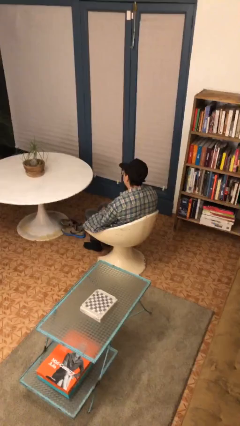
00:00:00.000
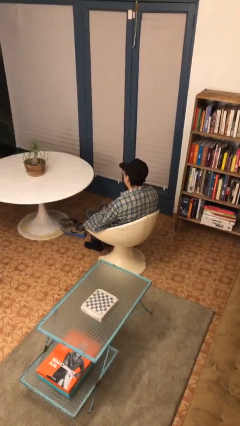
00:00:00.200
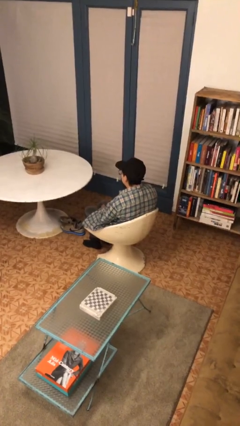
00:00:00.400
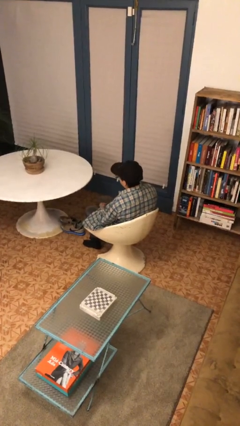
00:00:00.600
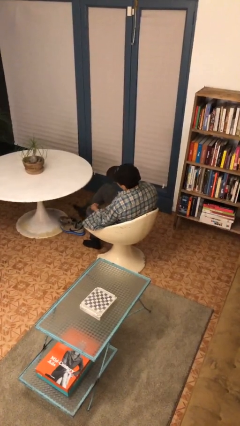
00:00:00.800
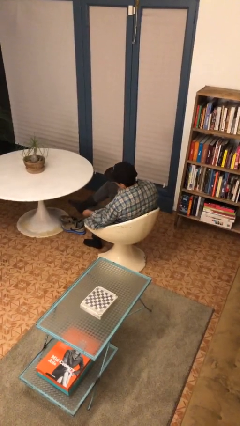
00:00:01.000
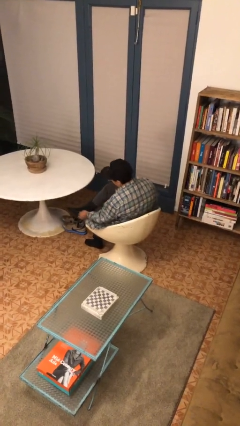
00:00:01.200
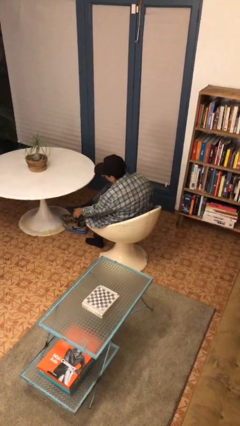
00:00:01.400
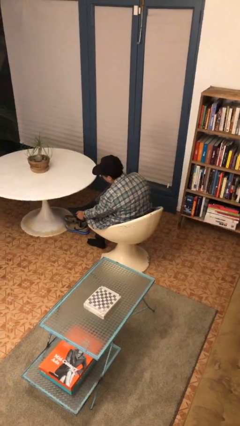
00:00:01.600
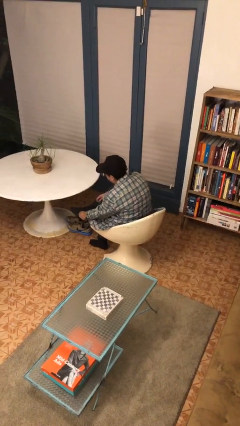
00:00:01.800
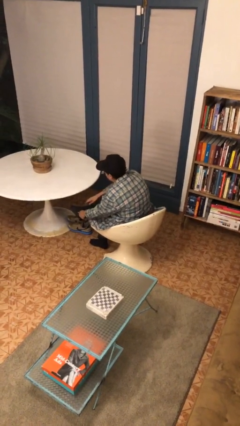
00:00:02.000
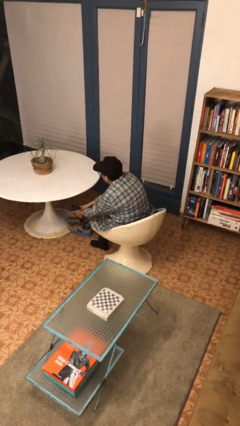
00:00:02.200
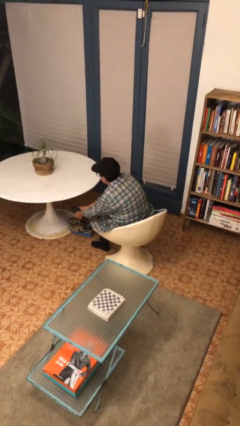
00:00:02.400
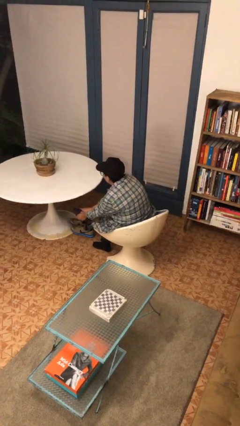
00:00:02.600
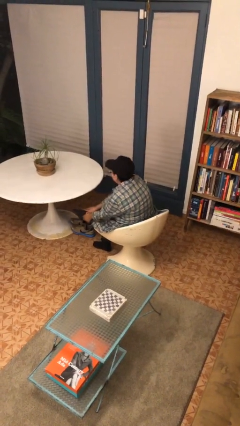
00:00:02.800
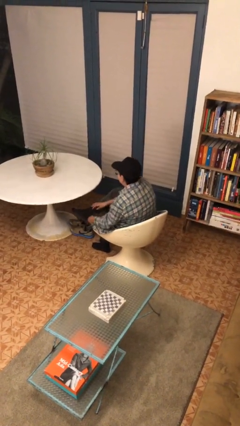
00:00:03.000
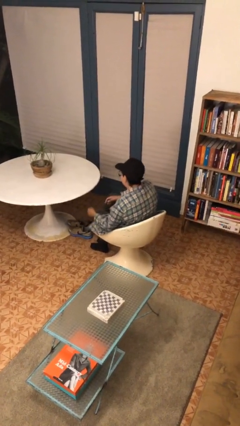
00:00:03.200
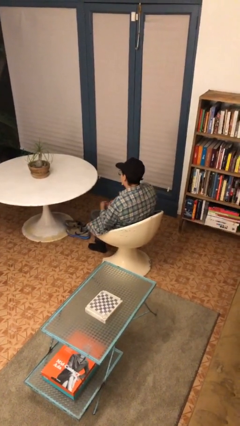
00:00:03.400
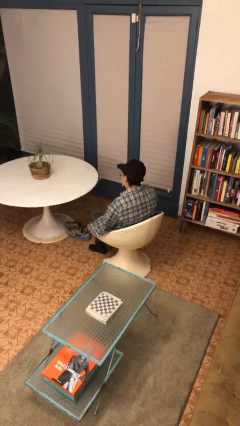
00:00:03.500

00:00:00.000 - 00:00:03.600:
person rubs foot

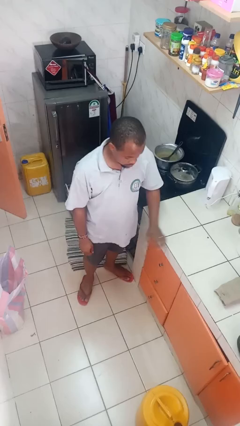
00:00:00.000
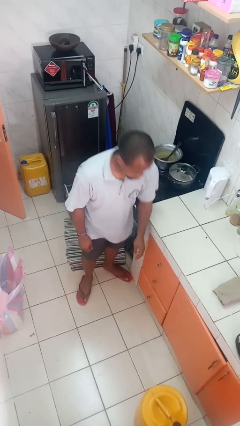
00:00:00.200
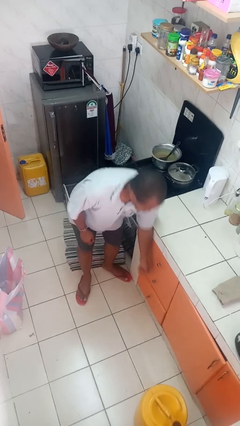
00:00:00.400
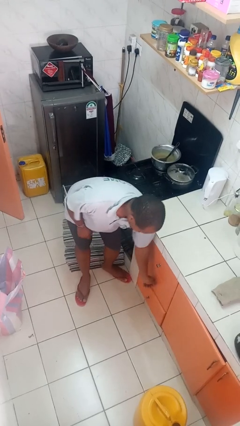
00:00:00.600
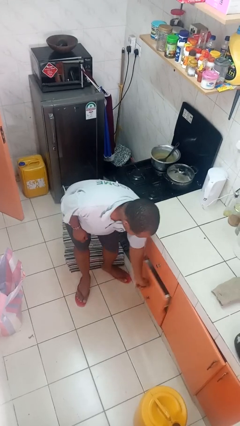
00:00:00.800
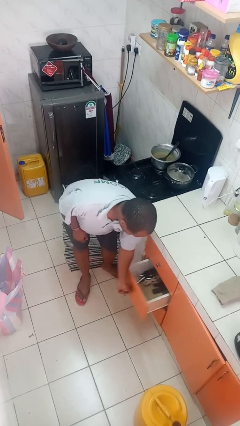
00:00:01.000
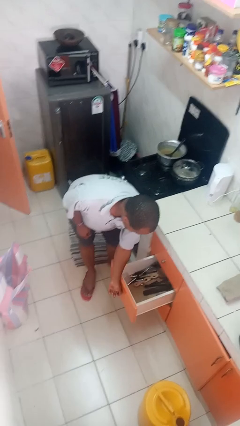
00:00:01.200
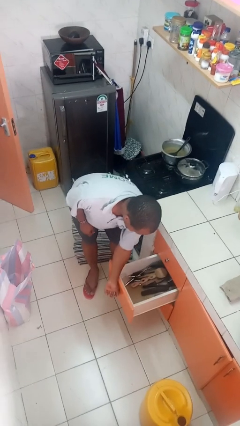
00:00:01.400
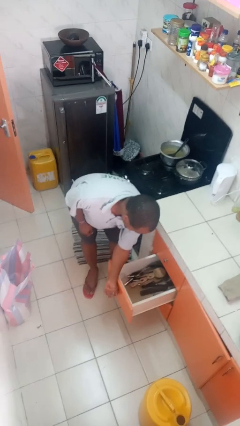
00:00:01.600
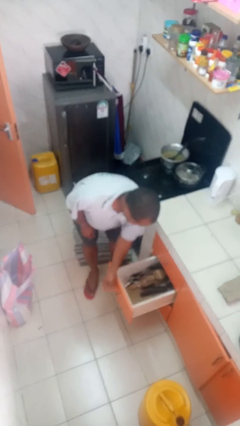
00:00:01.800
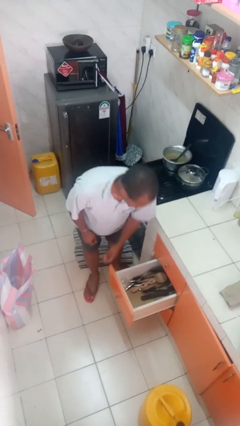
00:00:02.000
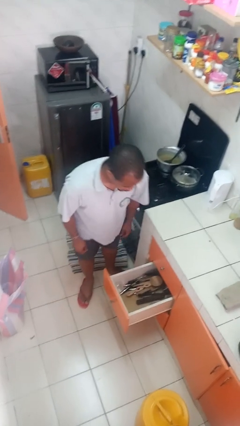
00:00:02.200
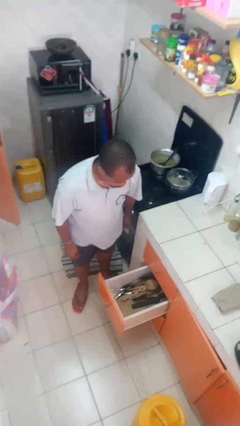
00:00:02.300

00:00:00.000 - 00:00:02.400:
person opens kitchen drawer

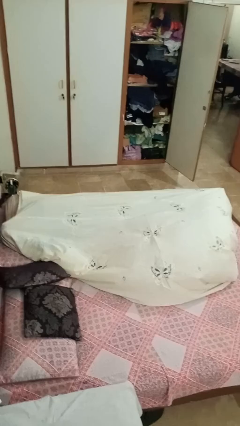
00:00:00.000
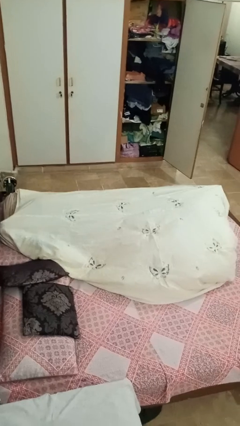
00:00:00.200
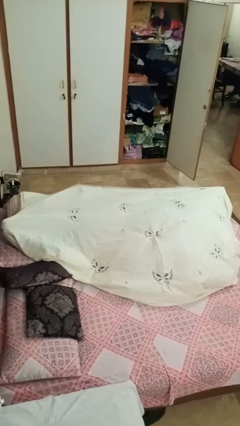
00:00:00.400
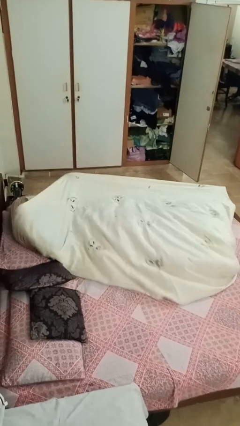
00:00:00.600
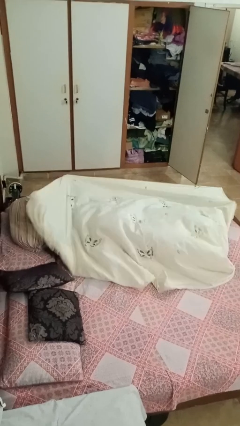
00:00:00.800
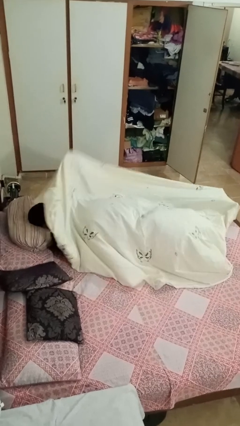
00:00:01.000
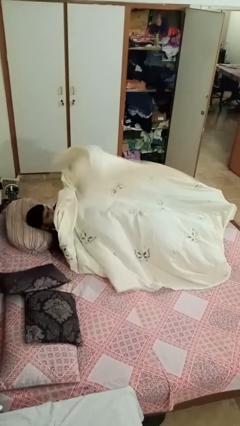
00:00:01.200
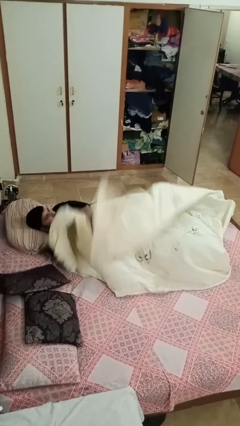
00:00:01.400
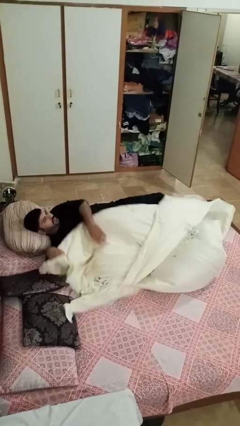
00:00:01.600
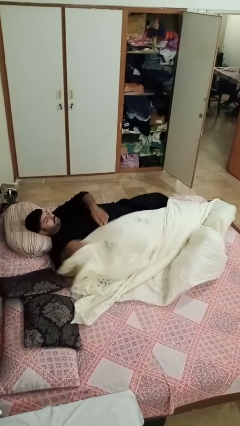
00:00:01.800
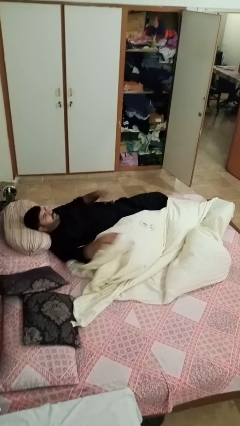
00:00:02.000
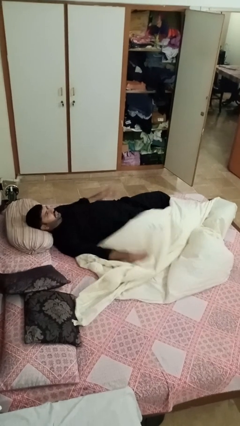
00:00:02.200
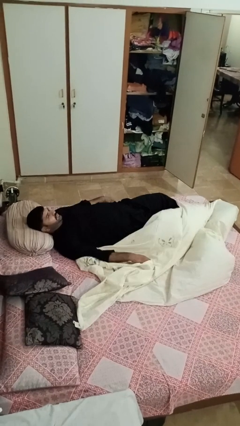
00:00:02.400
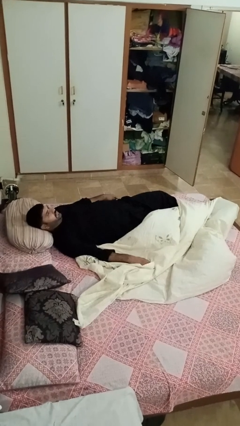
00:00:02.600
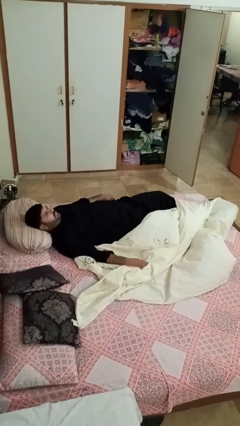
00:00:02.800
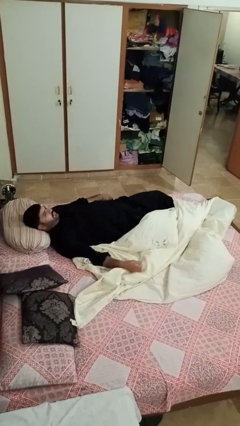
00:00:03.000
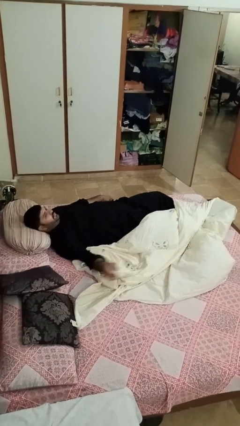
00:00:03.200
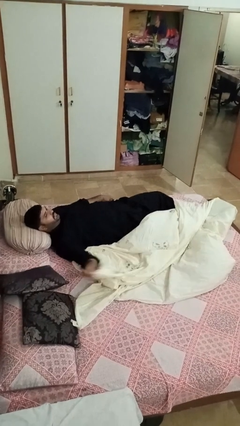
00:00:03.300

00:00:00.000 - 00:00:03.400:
person uncovers with bedsheets

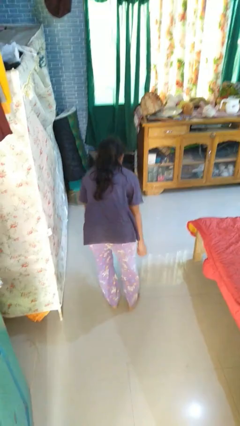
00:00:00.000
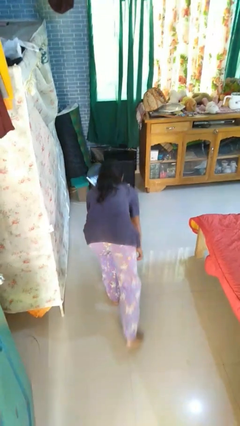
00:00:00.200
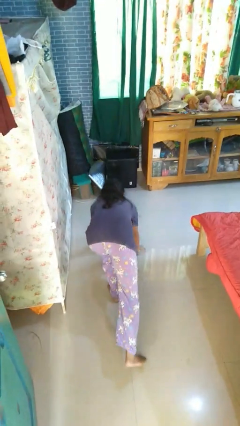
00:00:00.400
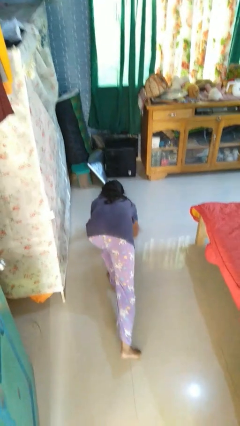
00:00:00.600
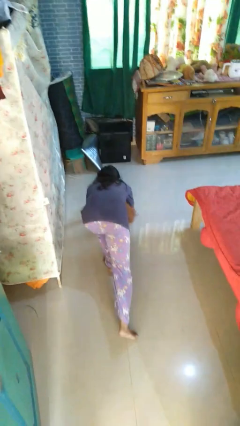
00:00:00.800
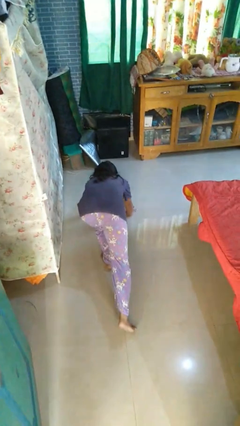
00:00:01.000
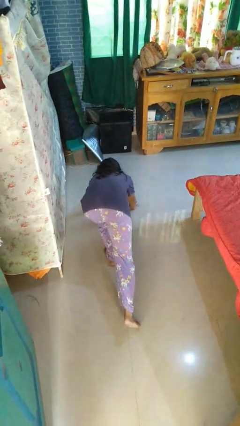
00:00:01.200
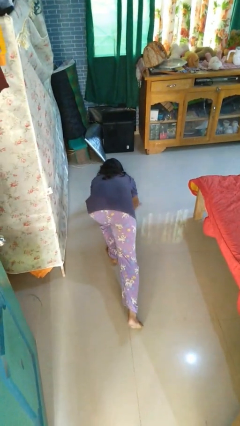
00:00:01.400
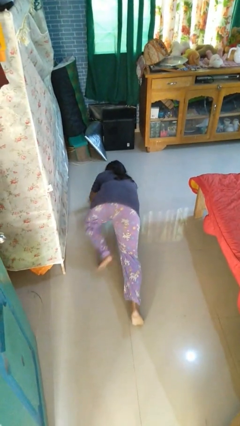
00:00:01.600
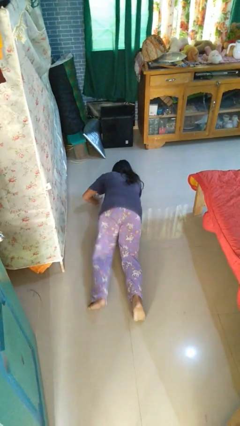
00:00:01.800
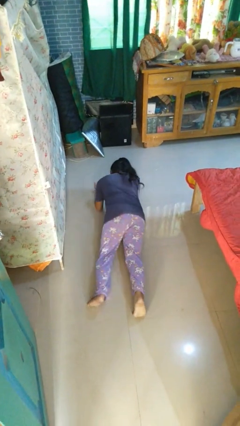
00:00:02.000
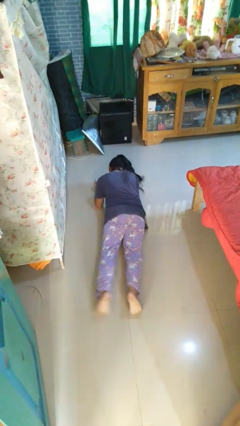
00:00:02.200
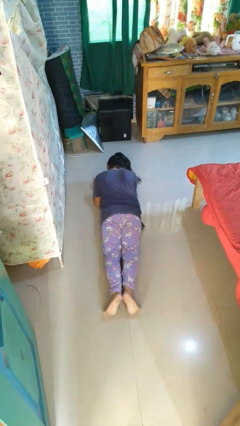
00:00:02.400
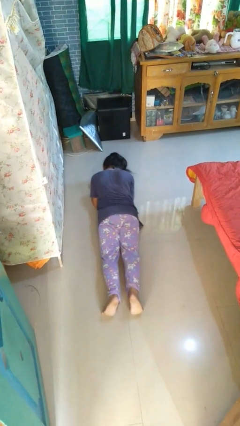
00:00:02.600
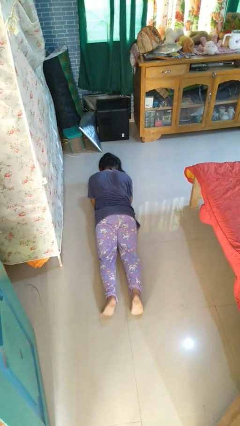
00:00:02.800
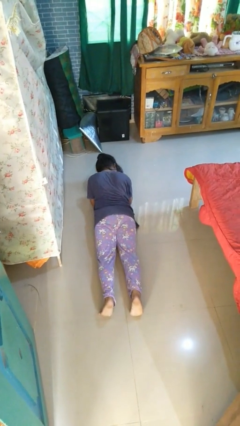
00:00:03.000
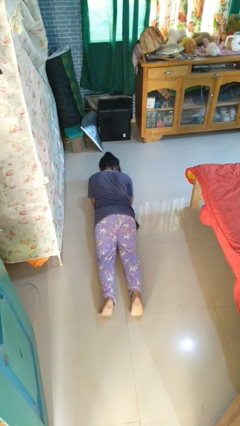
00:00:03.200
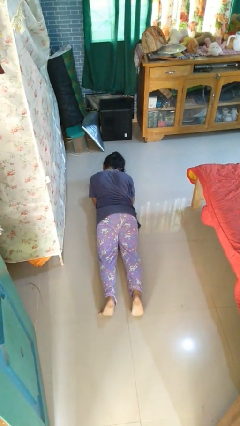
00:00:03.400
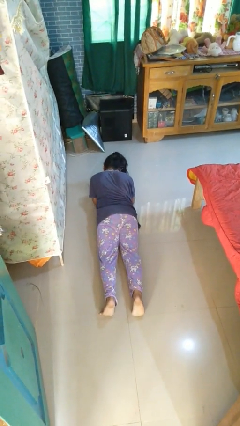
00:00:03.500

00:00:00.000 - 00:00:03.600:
person exercises with plank

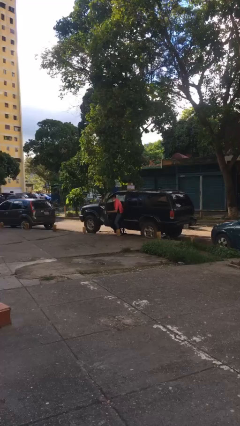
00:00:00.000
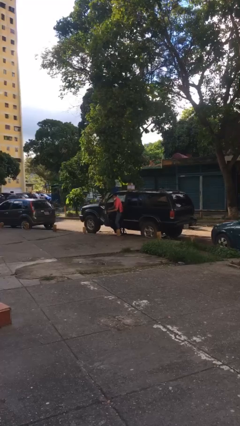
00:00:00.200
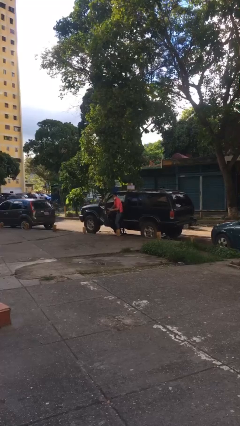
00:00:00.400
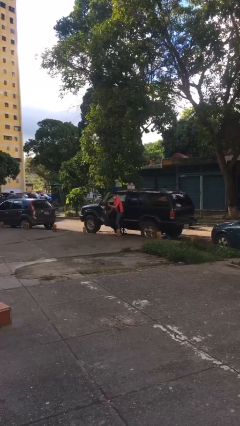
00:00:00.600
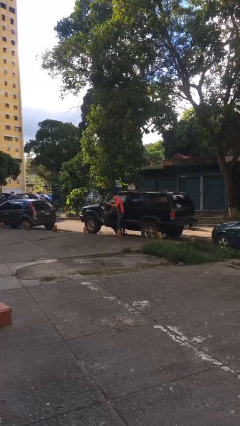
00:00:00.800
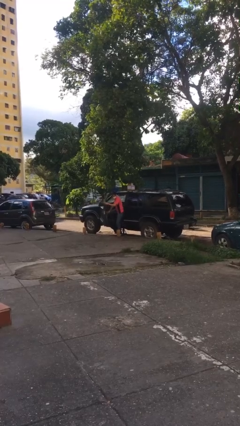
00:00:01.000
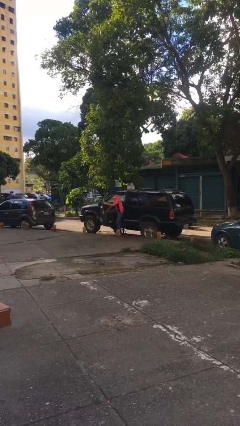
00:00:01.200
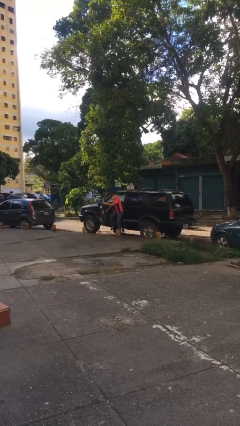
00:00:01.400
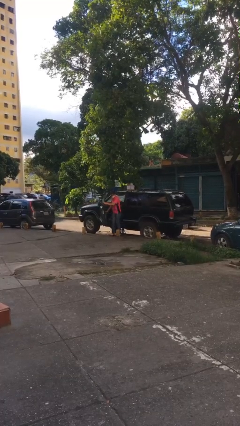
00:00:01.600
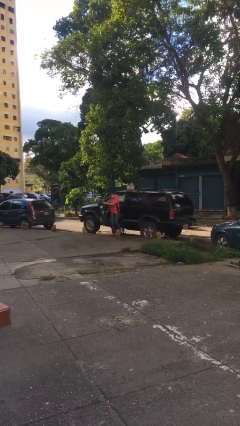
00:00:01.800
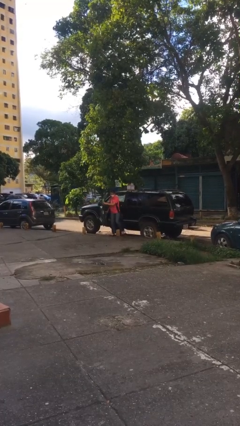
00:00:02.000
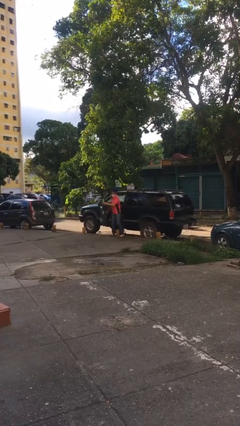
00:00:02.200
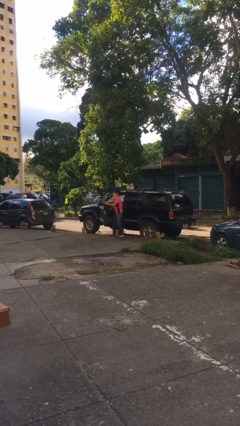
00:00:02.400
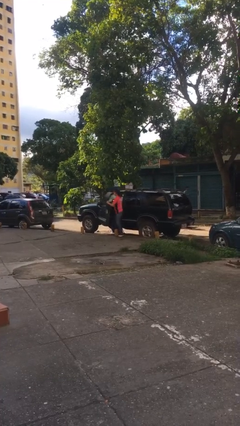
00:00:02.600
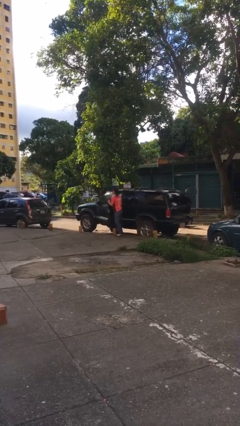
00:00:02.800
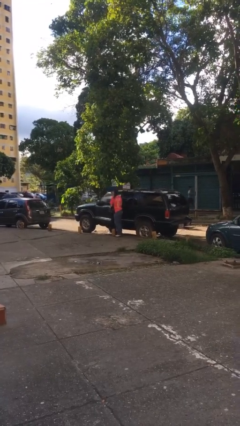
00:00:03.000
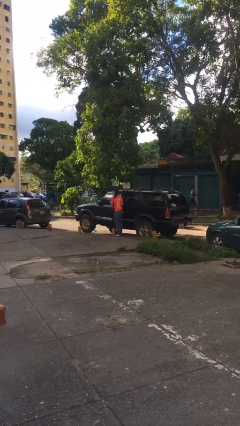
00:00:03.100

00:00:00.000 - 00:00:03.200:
person exits car

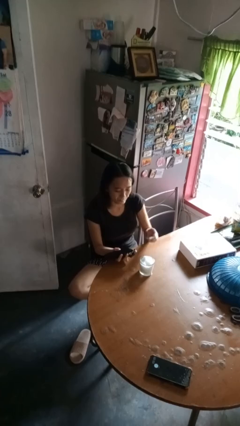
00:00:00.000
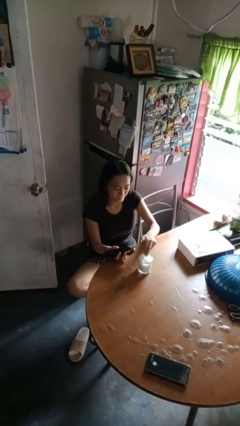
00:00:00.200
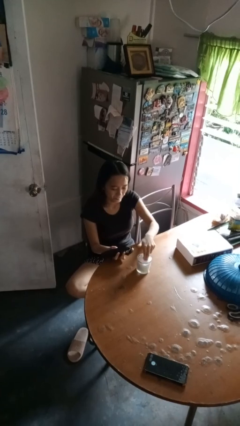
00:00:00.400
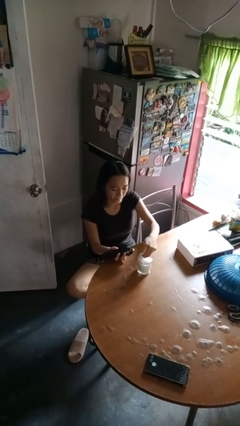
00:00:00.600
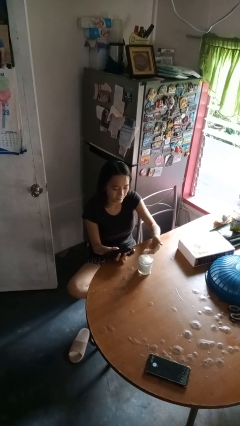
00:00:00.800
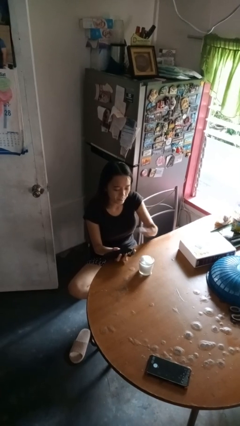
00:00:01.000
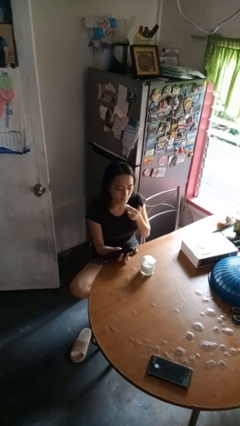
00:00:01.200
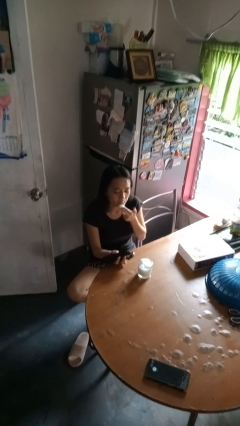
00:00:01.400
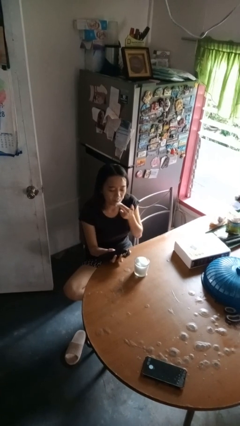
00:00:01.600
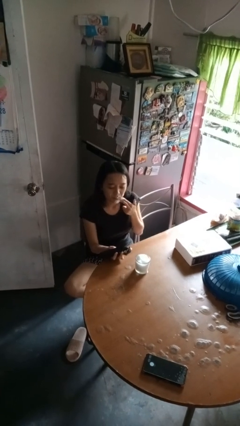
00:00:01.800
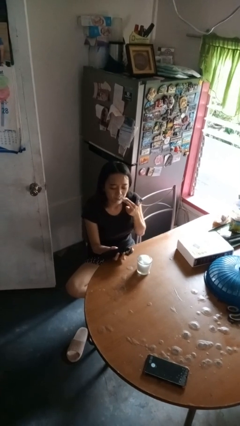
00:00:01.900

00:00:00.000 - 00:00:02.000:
person applies shaving cream
